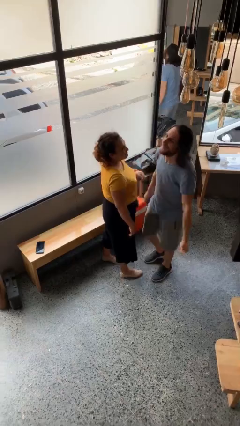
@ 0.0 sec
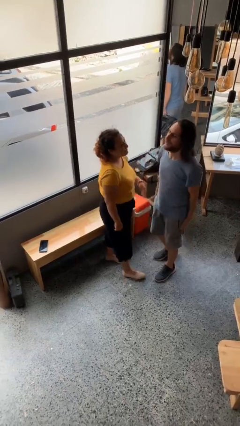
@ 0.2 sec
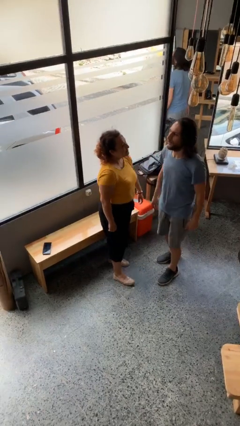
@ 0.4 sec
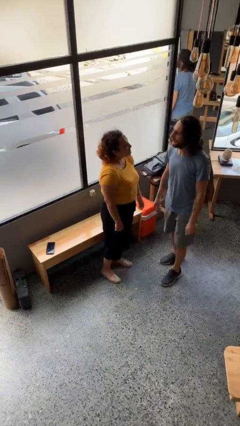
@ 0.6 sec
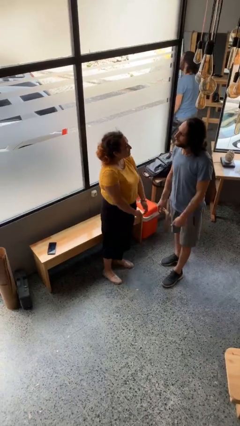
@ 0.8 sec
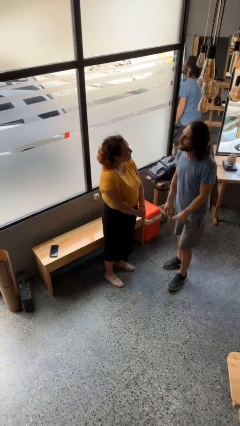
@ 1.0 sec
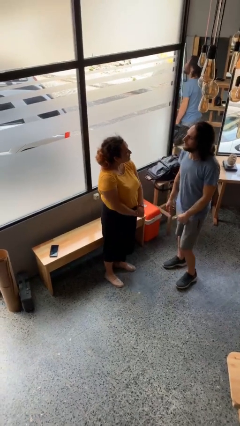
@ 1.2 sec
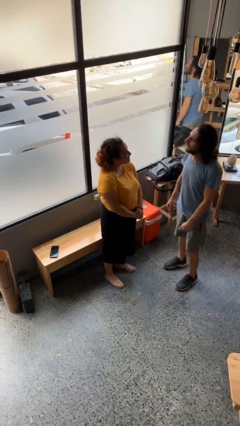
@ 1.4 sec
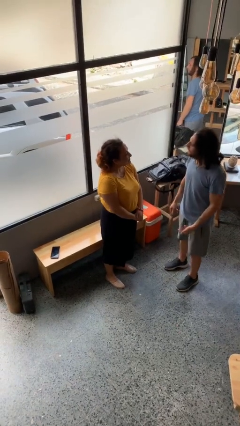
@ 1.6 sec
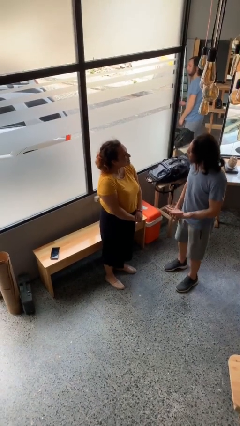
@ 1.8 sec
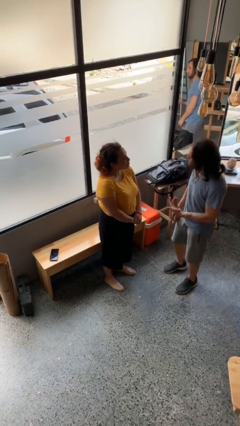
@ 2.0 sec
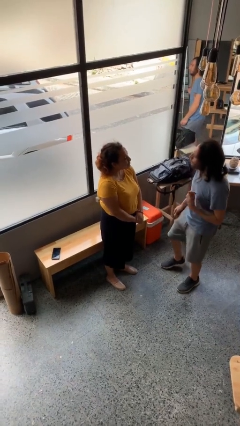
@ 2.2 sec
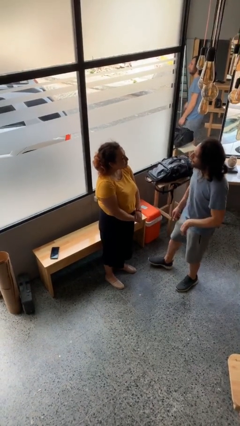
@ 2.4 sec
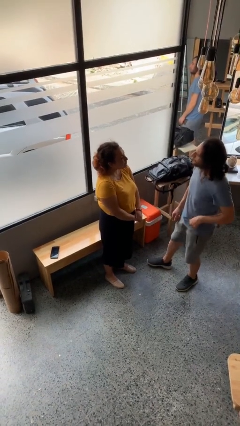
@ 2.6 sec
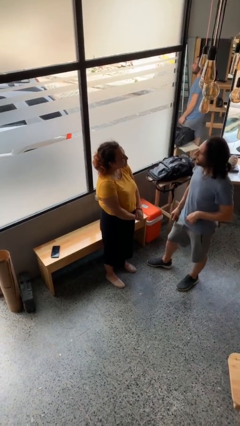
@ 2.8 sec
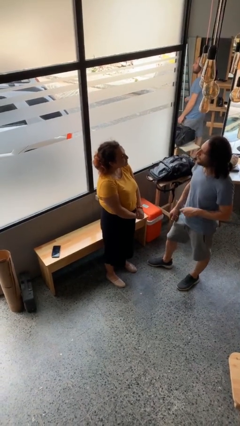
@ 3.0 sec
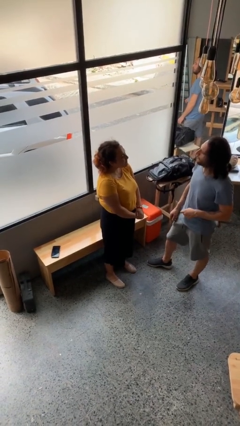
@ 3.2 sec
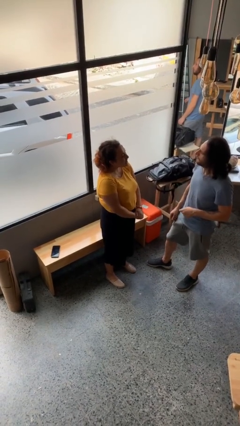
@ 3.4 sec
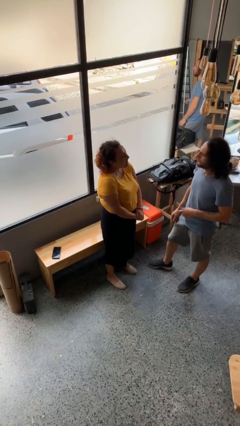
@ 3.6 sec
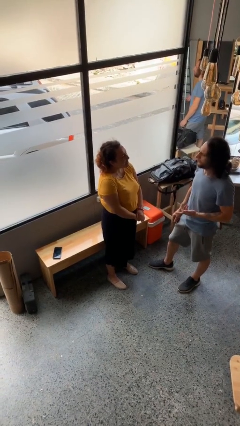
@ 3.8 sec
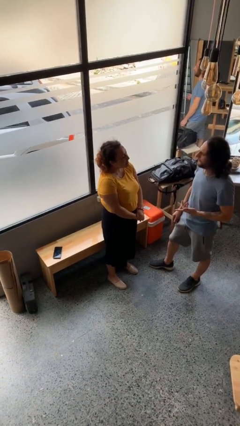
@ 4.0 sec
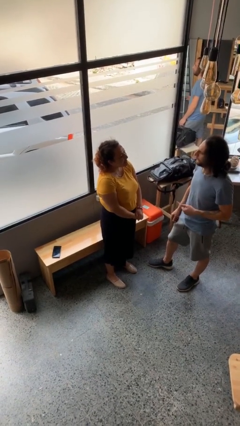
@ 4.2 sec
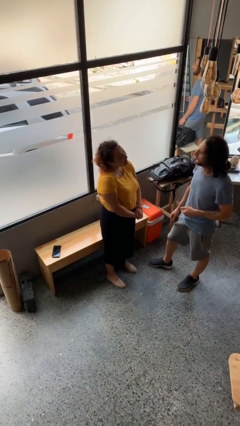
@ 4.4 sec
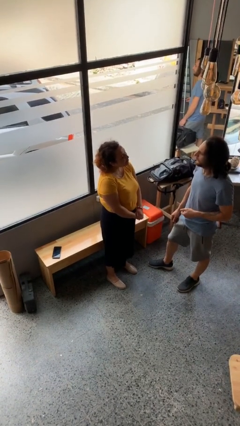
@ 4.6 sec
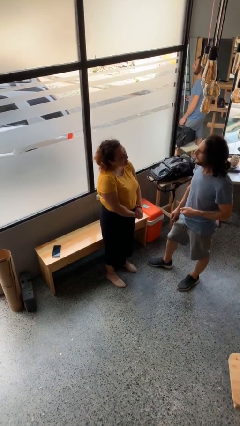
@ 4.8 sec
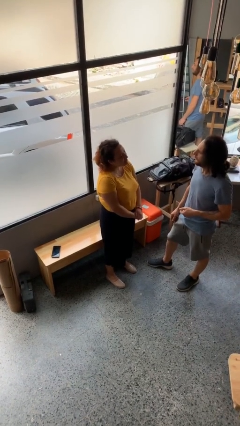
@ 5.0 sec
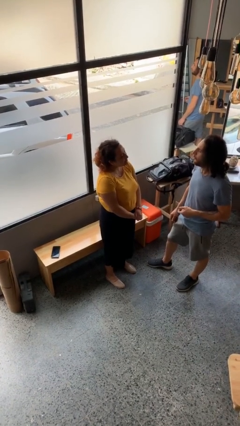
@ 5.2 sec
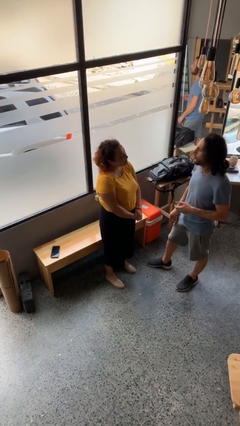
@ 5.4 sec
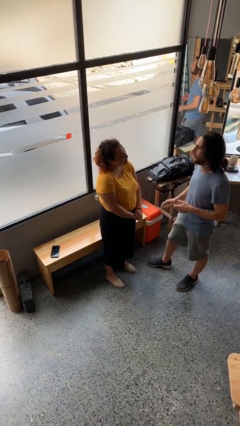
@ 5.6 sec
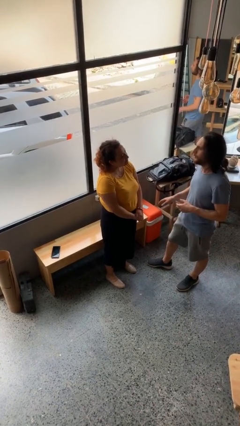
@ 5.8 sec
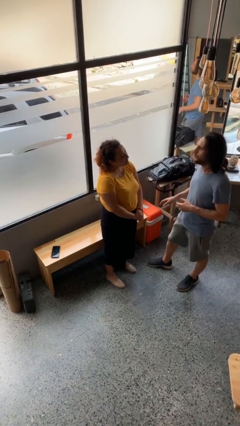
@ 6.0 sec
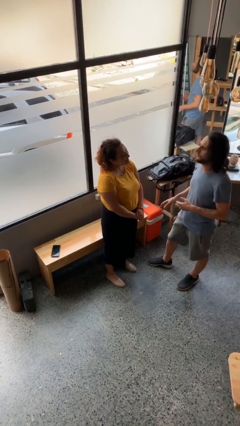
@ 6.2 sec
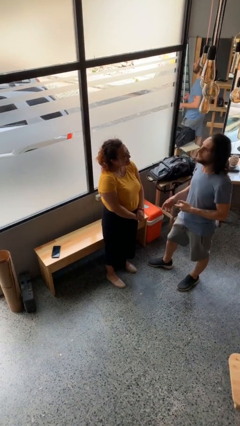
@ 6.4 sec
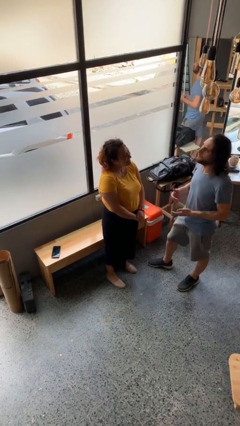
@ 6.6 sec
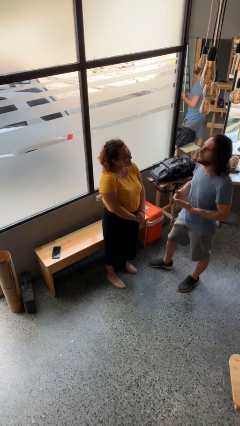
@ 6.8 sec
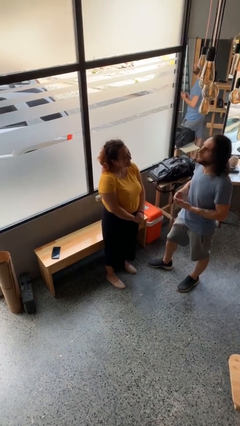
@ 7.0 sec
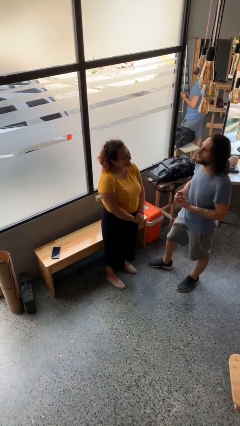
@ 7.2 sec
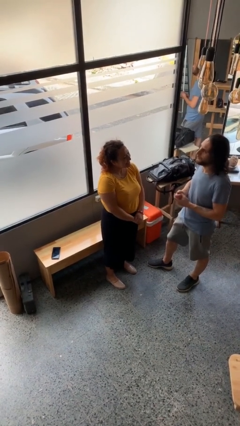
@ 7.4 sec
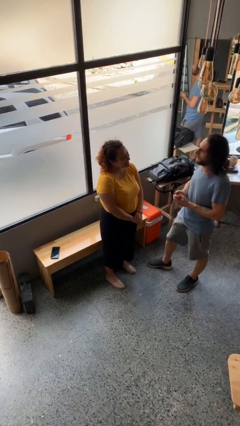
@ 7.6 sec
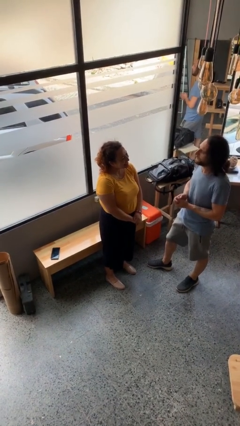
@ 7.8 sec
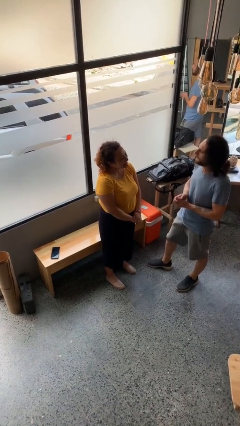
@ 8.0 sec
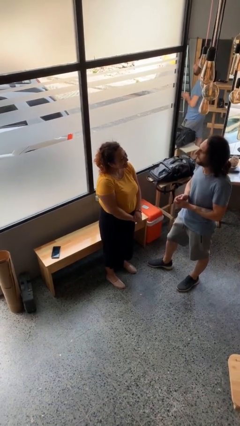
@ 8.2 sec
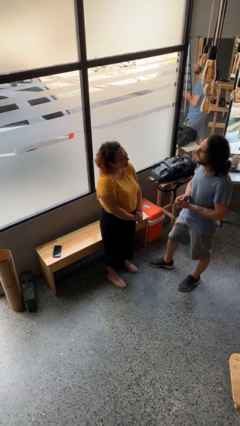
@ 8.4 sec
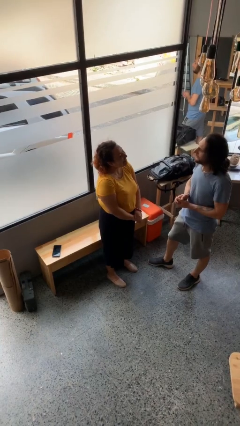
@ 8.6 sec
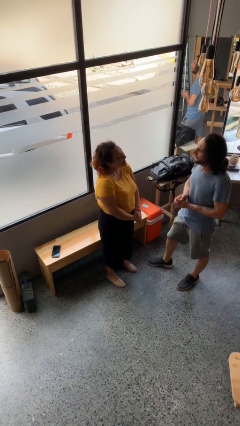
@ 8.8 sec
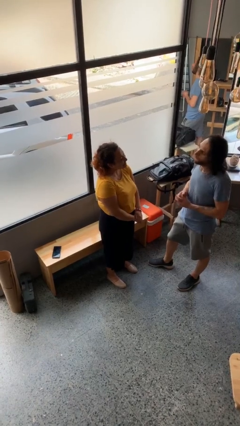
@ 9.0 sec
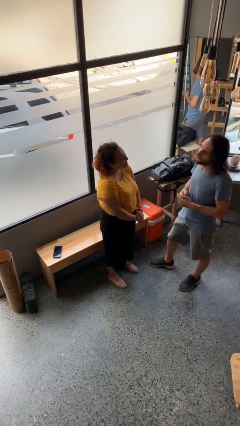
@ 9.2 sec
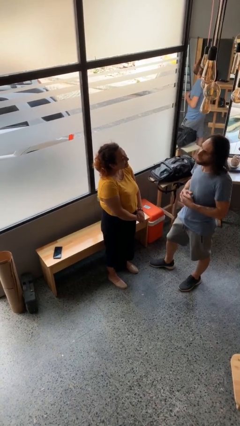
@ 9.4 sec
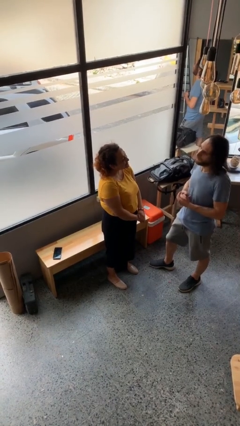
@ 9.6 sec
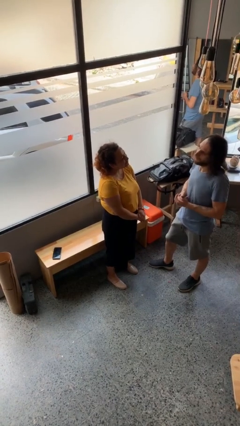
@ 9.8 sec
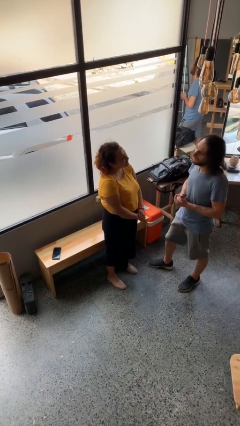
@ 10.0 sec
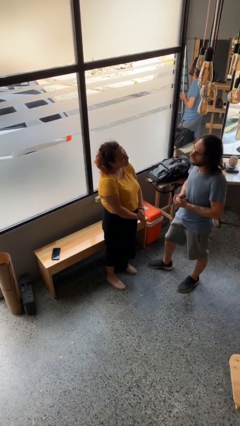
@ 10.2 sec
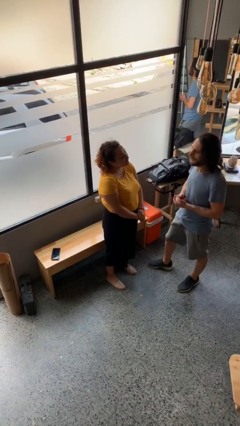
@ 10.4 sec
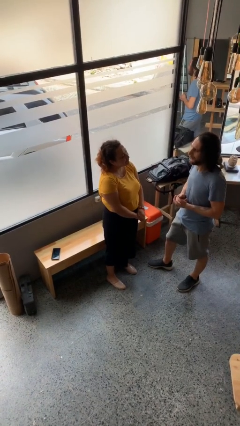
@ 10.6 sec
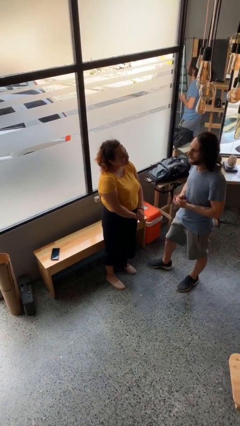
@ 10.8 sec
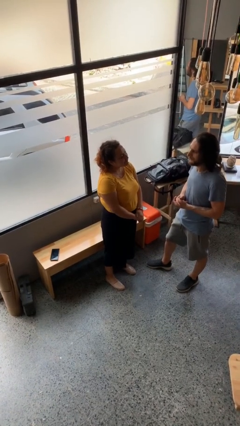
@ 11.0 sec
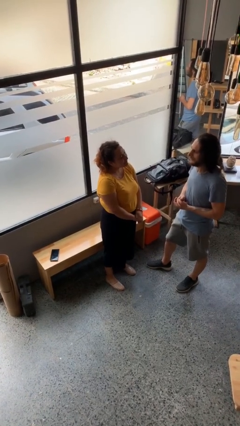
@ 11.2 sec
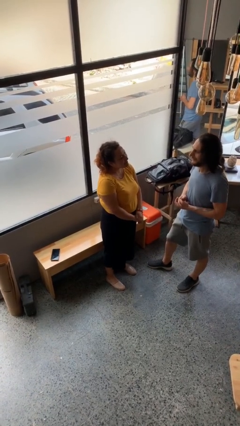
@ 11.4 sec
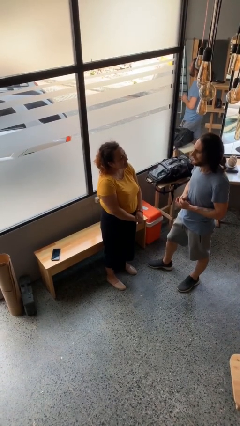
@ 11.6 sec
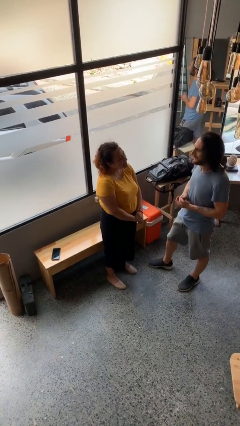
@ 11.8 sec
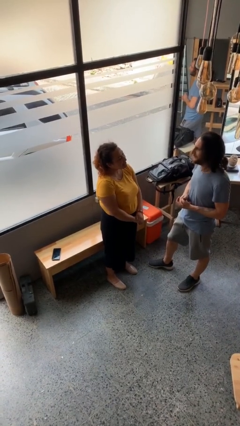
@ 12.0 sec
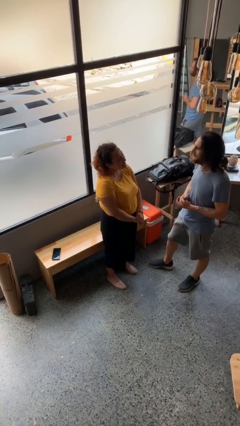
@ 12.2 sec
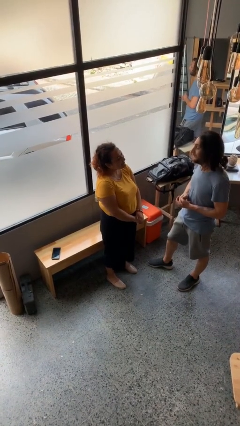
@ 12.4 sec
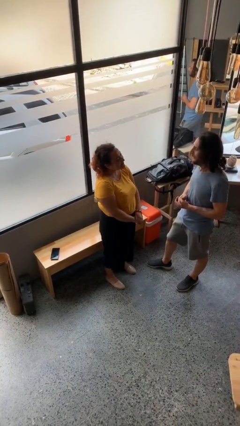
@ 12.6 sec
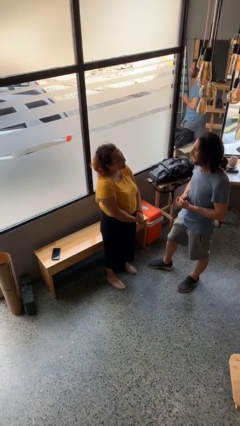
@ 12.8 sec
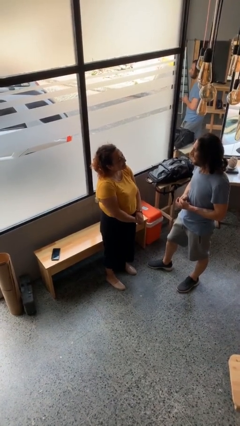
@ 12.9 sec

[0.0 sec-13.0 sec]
person talks to person

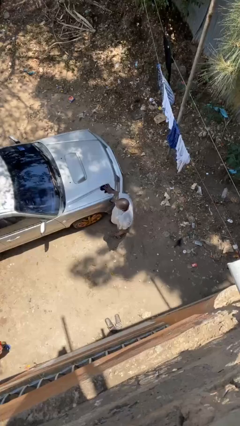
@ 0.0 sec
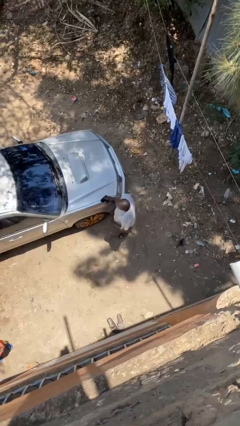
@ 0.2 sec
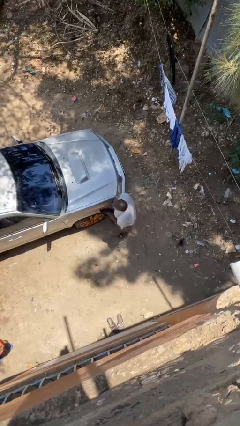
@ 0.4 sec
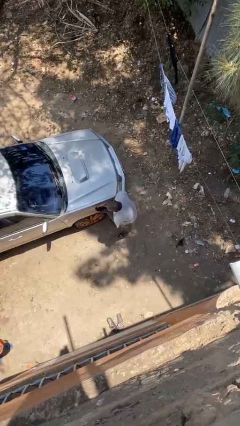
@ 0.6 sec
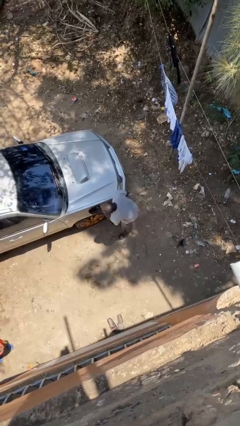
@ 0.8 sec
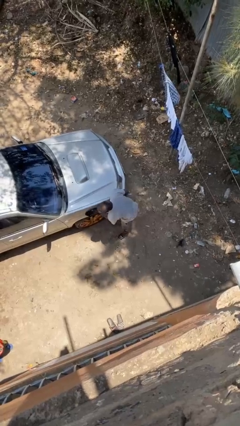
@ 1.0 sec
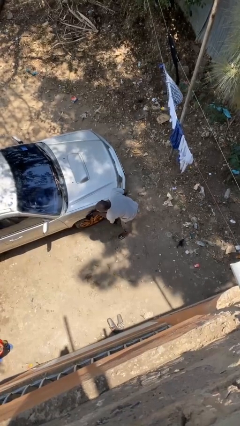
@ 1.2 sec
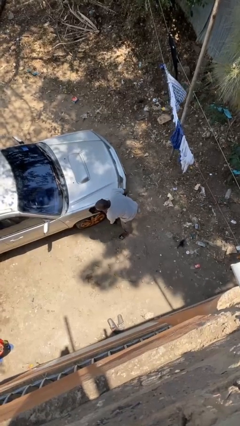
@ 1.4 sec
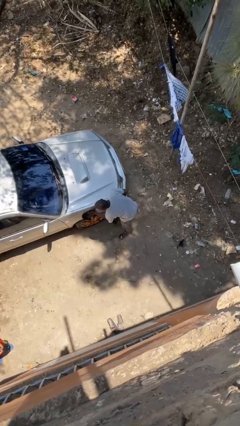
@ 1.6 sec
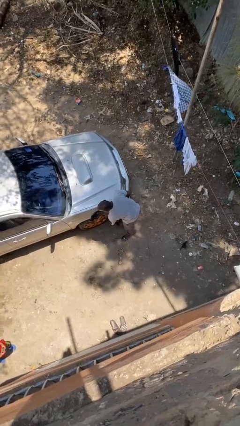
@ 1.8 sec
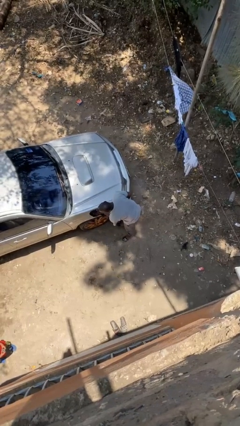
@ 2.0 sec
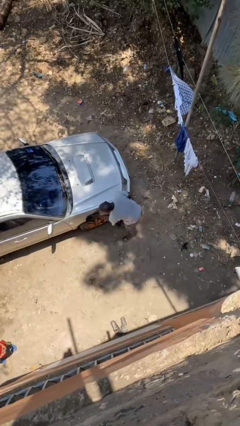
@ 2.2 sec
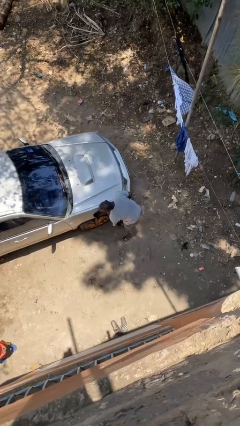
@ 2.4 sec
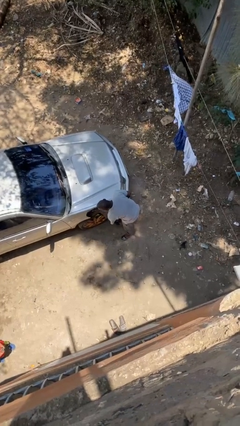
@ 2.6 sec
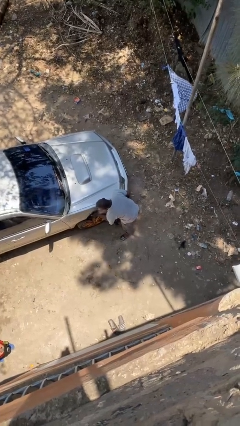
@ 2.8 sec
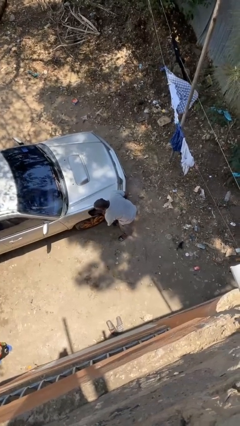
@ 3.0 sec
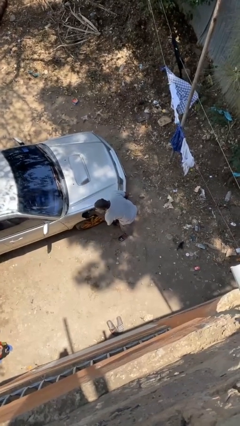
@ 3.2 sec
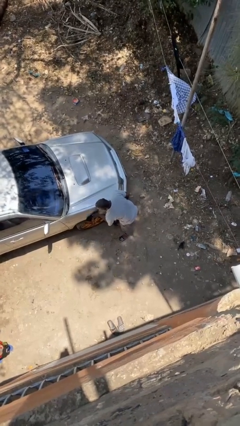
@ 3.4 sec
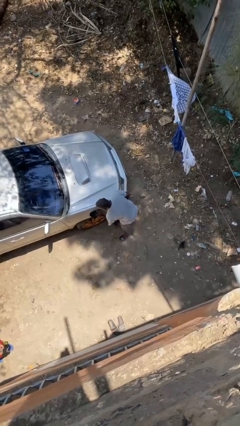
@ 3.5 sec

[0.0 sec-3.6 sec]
person polishes car with rag

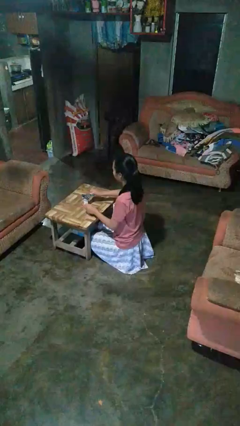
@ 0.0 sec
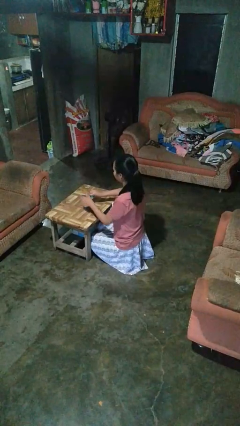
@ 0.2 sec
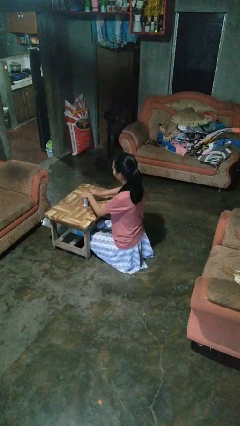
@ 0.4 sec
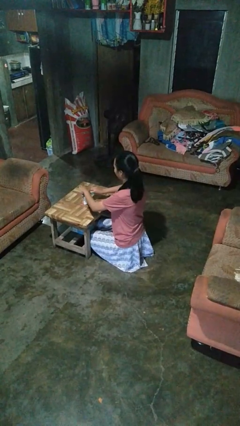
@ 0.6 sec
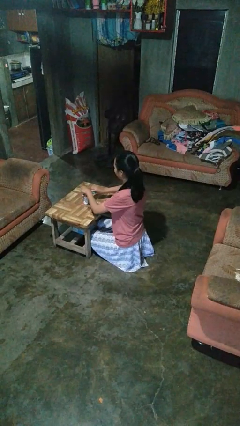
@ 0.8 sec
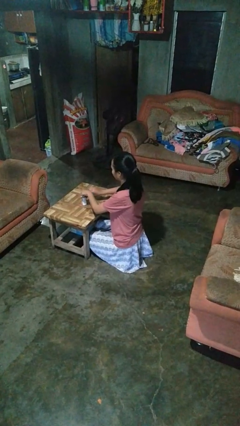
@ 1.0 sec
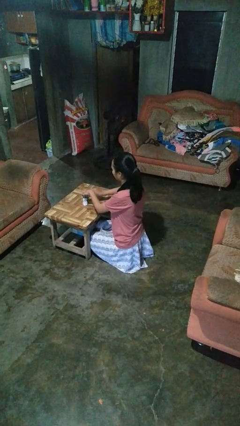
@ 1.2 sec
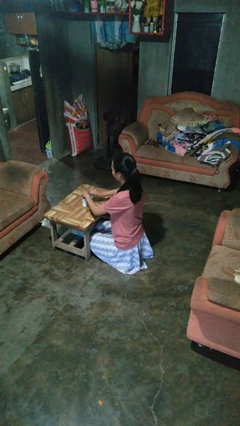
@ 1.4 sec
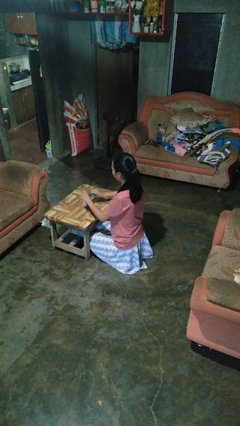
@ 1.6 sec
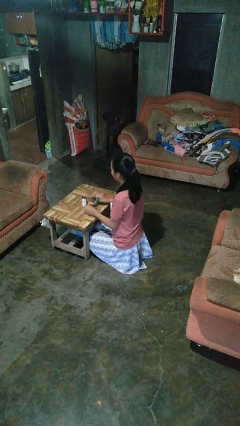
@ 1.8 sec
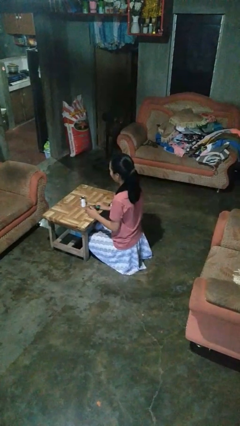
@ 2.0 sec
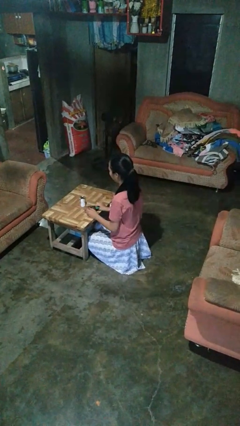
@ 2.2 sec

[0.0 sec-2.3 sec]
person opens can with can opener
